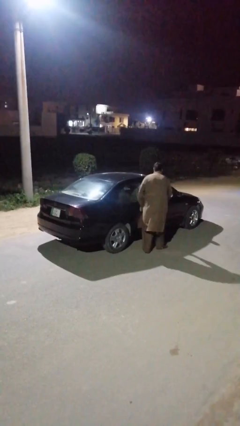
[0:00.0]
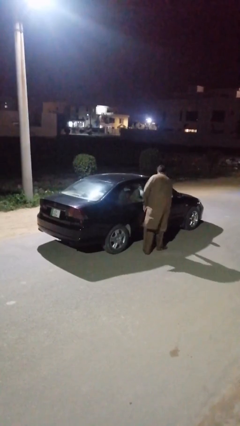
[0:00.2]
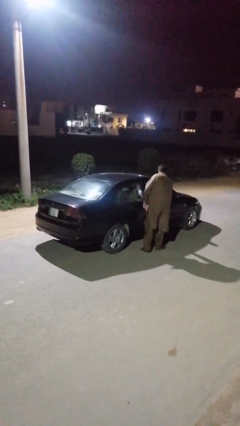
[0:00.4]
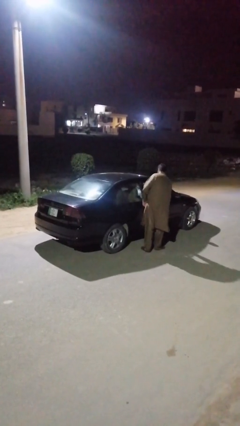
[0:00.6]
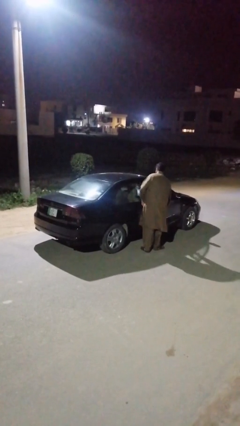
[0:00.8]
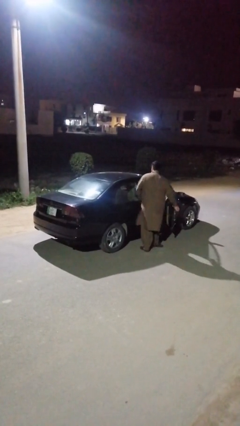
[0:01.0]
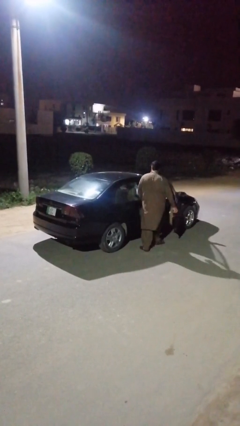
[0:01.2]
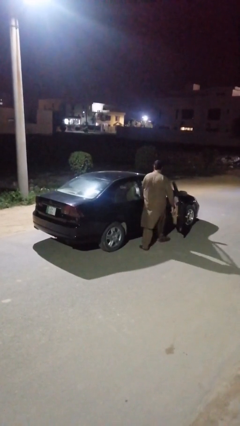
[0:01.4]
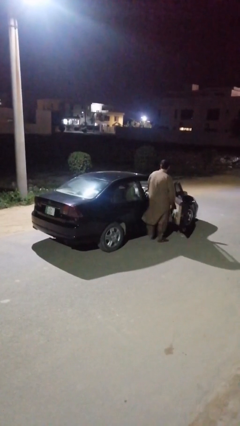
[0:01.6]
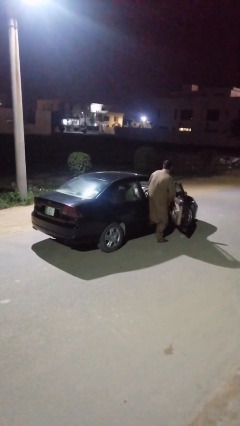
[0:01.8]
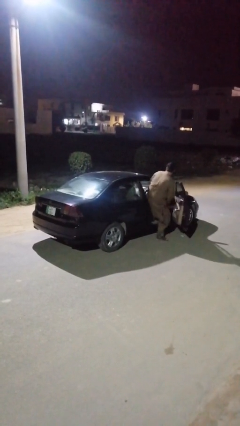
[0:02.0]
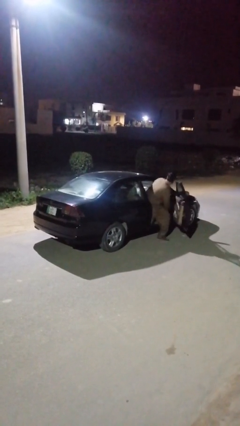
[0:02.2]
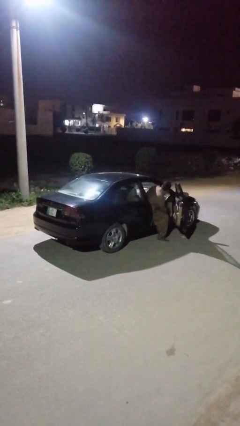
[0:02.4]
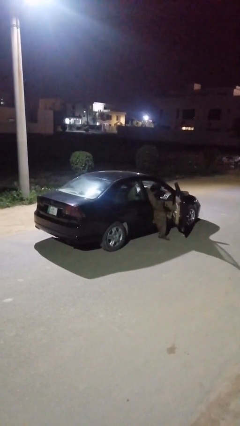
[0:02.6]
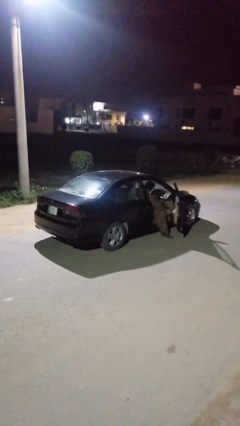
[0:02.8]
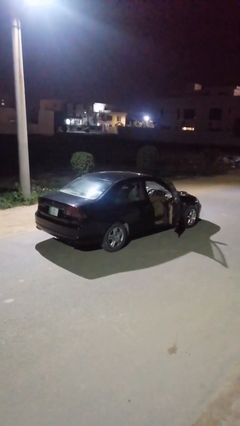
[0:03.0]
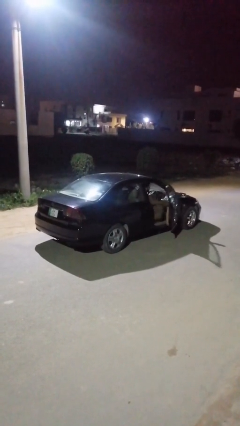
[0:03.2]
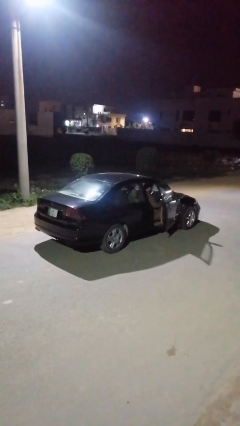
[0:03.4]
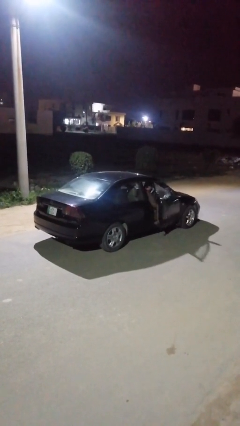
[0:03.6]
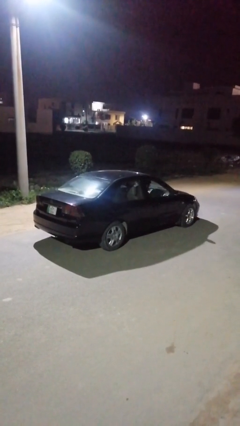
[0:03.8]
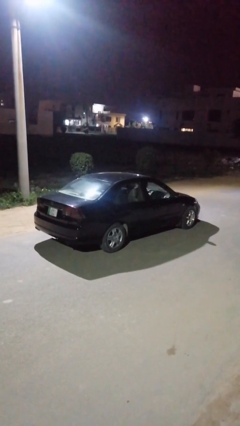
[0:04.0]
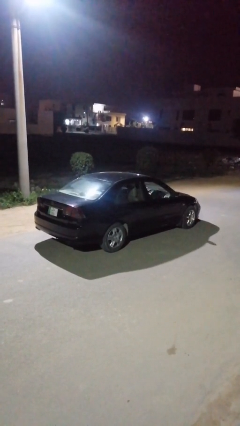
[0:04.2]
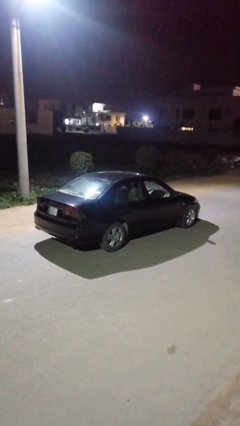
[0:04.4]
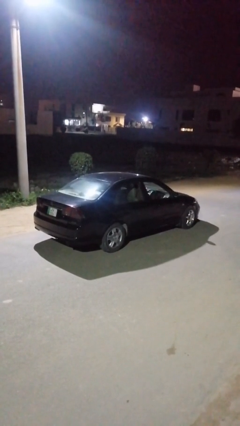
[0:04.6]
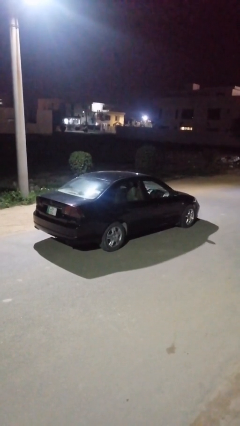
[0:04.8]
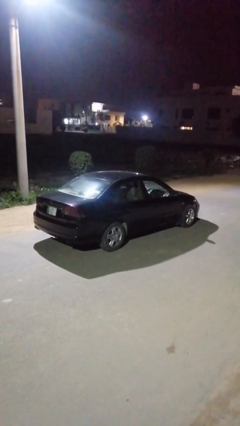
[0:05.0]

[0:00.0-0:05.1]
car picks up person

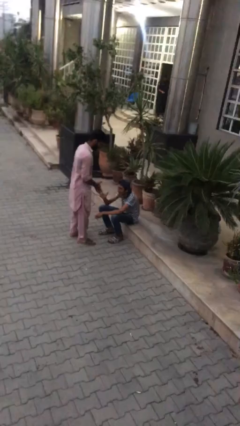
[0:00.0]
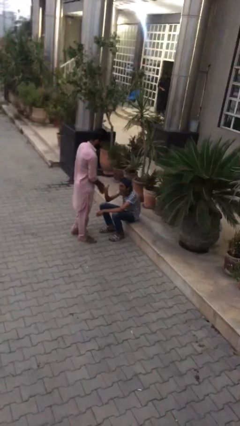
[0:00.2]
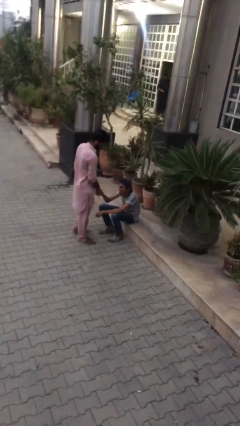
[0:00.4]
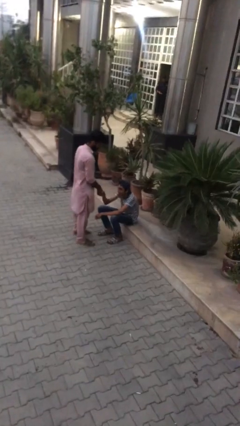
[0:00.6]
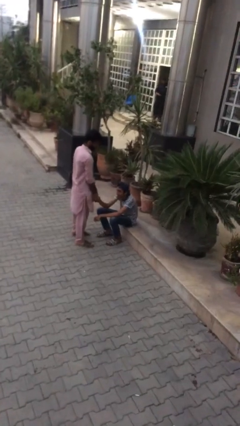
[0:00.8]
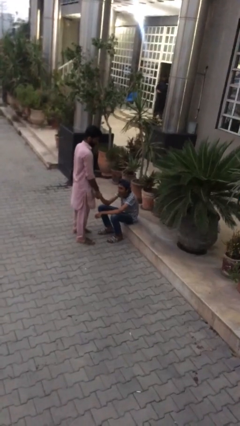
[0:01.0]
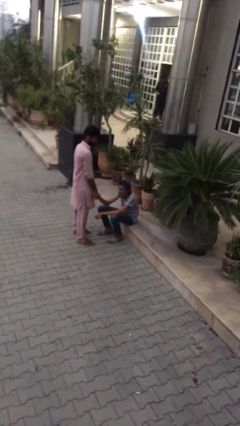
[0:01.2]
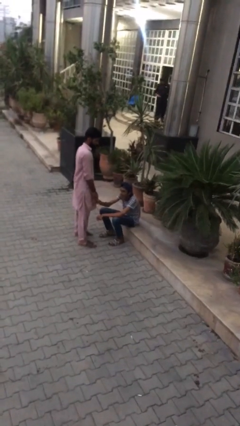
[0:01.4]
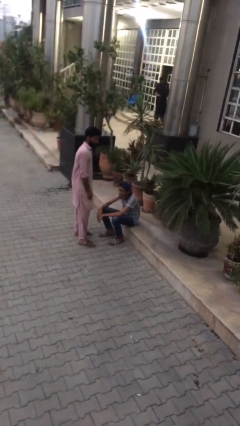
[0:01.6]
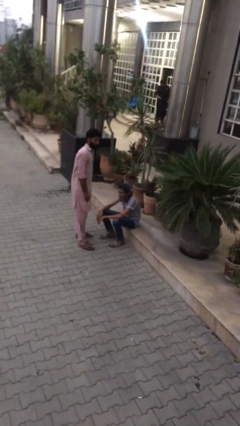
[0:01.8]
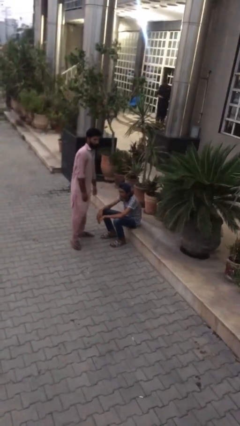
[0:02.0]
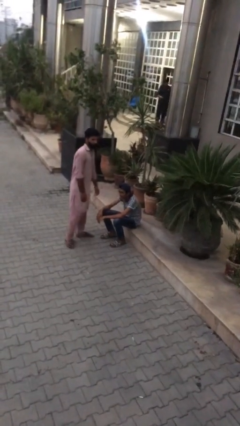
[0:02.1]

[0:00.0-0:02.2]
person shakes hand

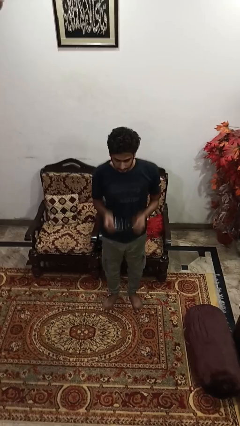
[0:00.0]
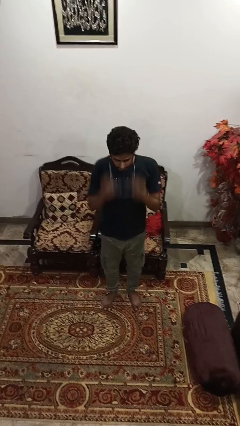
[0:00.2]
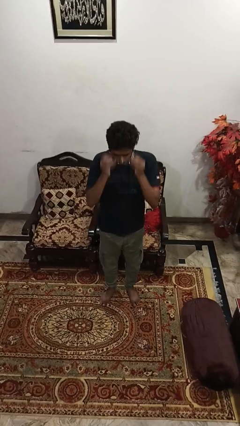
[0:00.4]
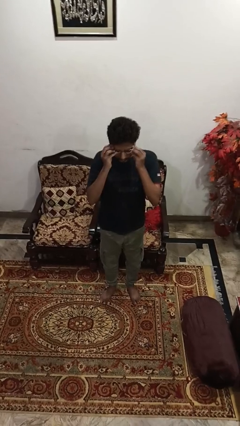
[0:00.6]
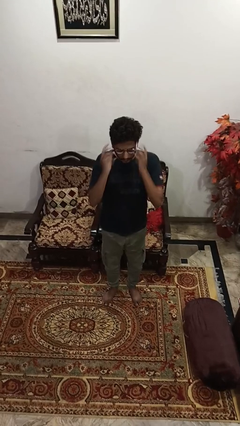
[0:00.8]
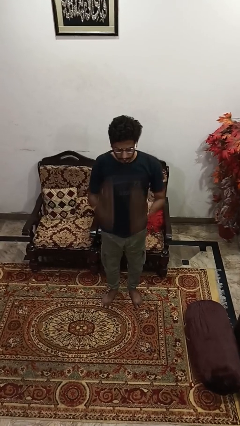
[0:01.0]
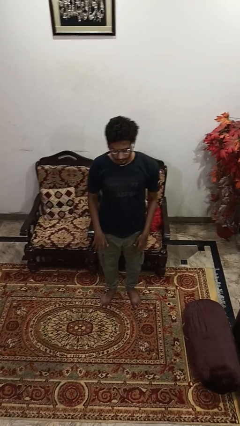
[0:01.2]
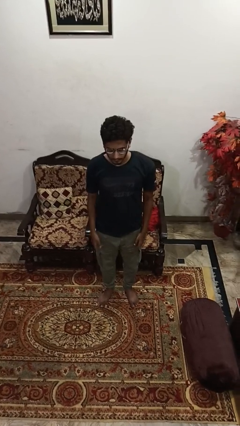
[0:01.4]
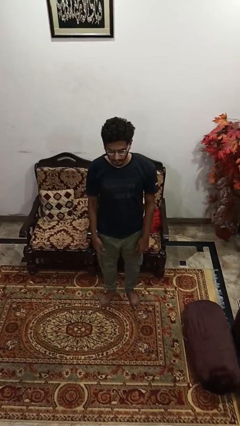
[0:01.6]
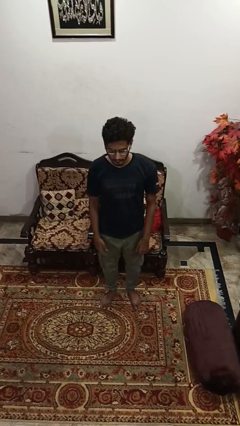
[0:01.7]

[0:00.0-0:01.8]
person puts on glasses

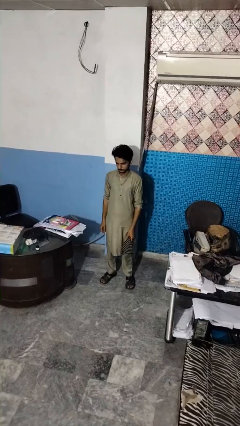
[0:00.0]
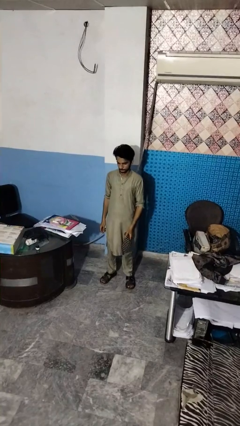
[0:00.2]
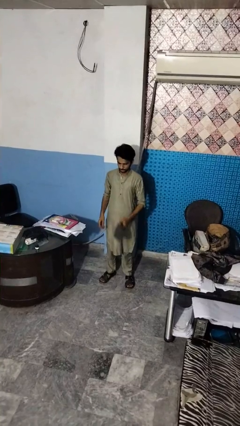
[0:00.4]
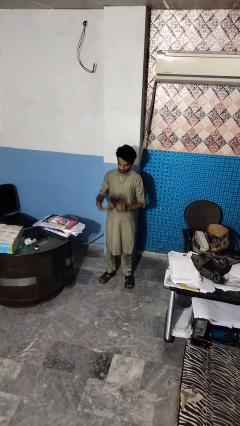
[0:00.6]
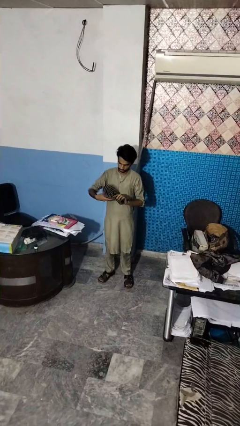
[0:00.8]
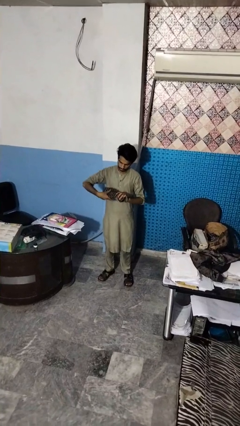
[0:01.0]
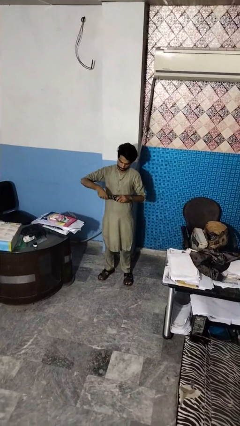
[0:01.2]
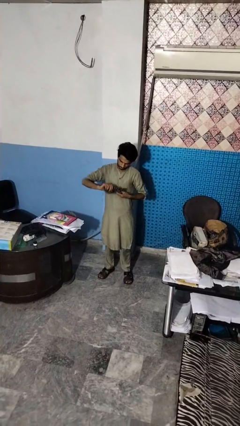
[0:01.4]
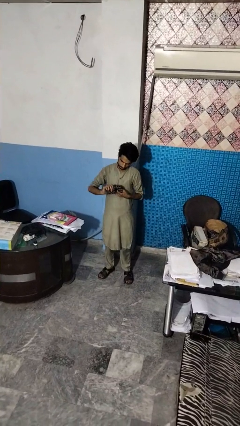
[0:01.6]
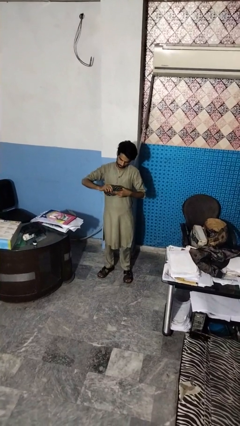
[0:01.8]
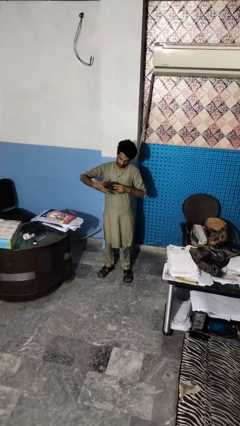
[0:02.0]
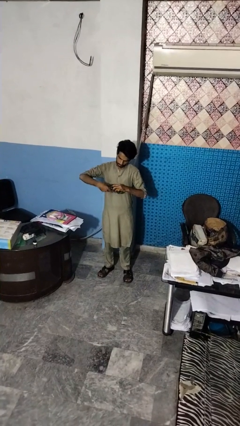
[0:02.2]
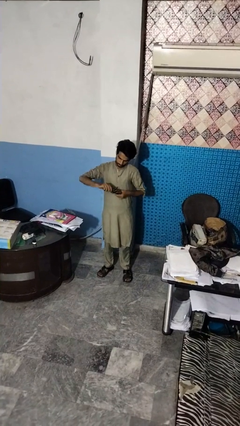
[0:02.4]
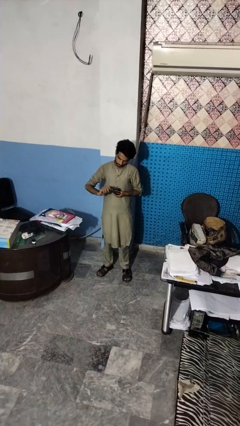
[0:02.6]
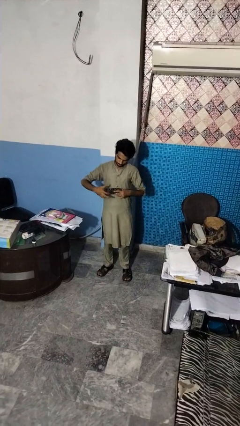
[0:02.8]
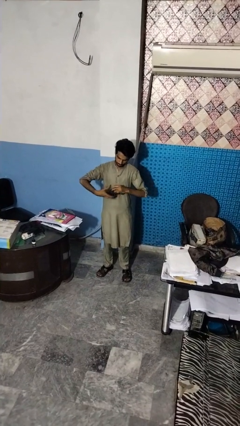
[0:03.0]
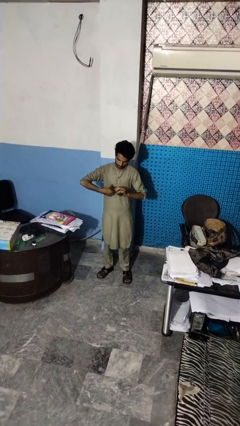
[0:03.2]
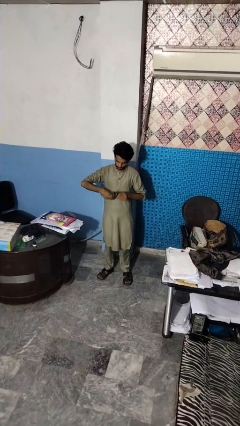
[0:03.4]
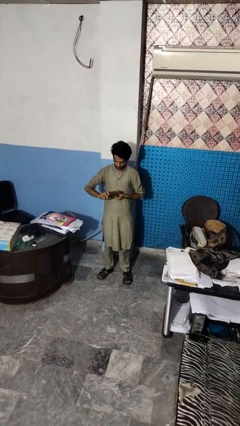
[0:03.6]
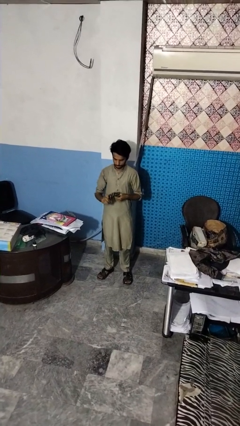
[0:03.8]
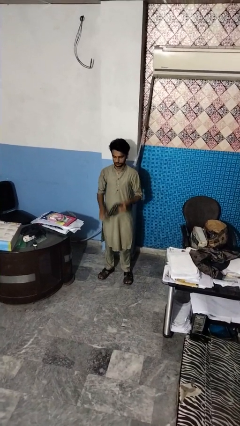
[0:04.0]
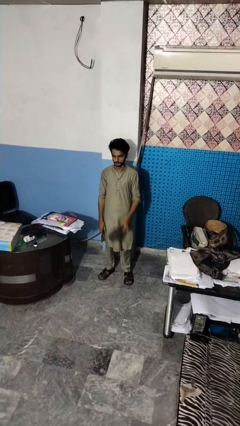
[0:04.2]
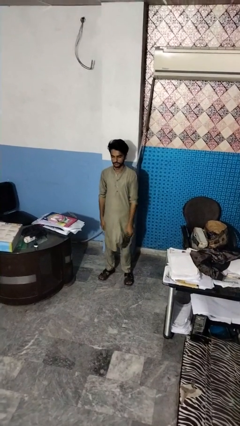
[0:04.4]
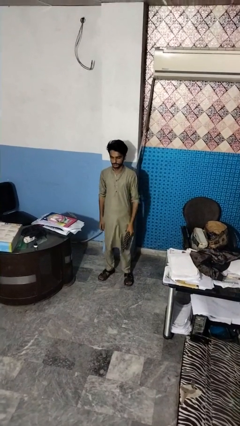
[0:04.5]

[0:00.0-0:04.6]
person squeezes object

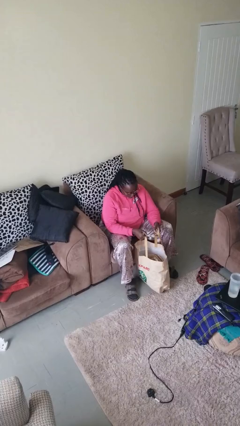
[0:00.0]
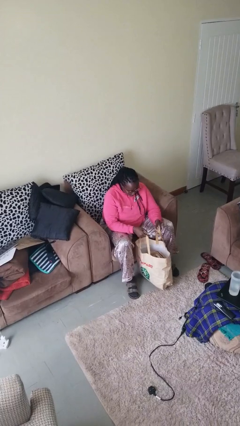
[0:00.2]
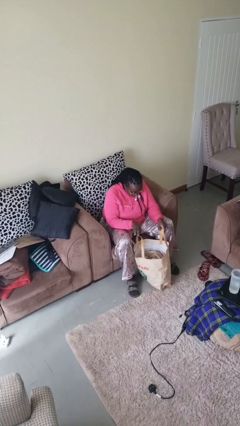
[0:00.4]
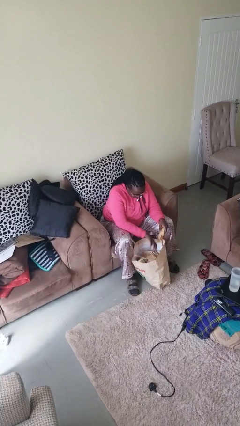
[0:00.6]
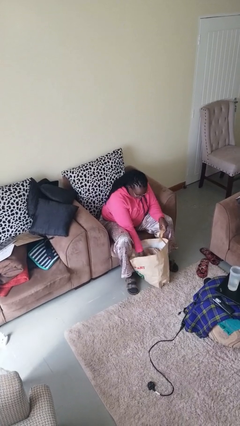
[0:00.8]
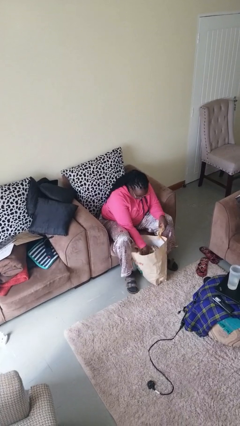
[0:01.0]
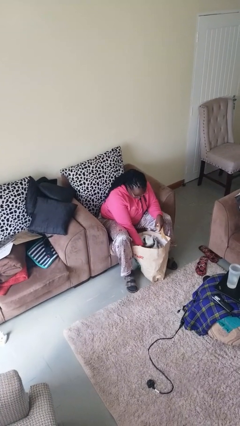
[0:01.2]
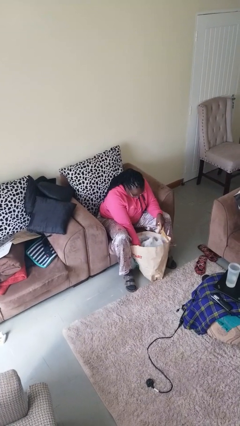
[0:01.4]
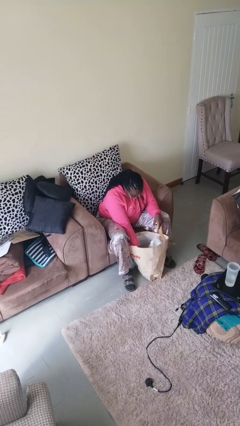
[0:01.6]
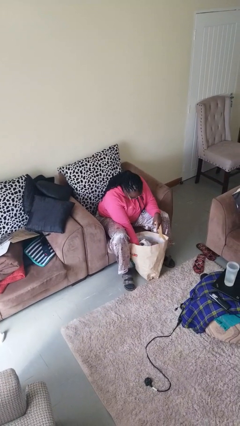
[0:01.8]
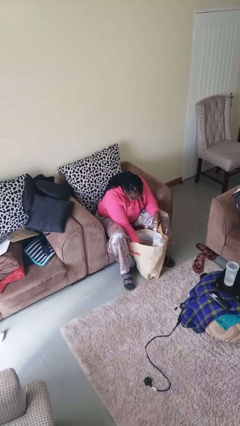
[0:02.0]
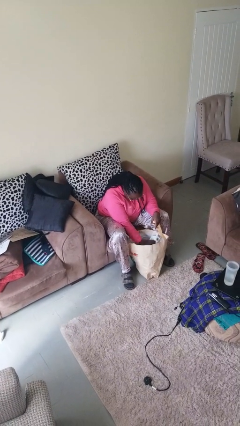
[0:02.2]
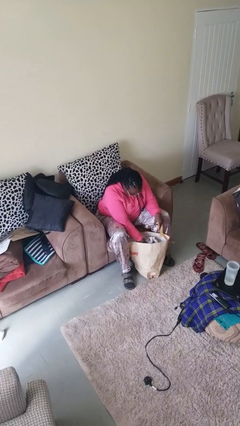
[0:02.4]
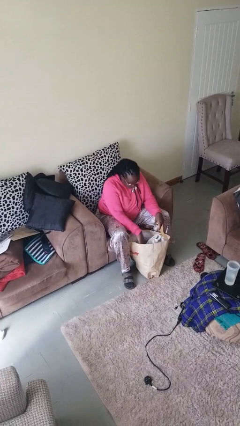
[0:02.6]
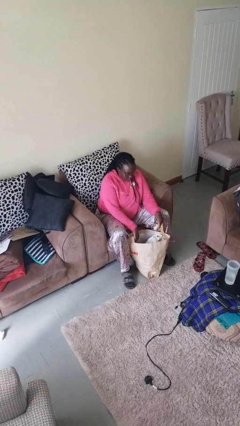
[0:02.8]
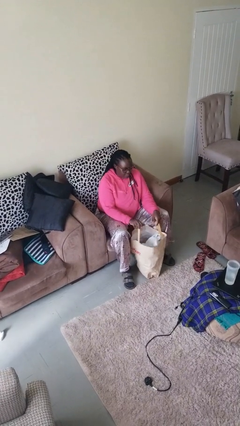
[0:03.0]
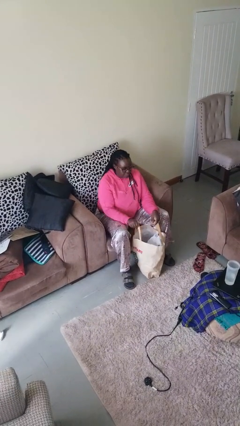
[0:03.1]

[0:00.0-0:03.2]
person searches in bag

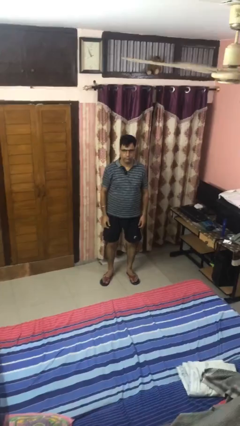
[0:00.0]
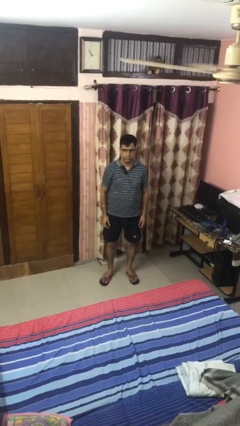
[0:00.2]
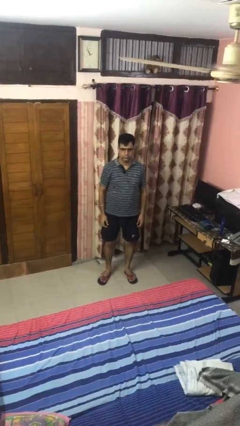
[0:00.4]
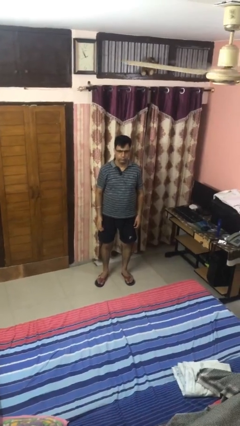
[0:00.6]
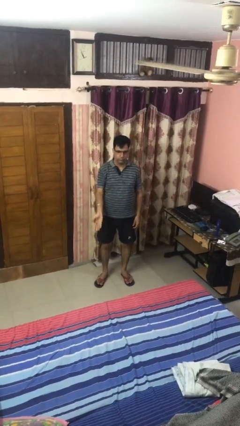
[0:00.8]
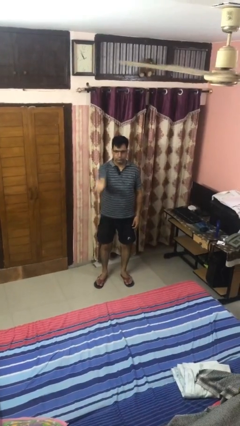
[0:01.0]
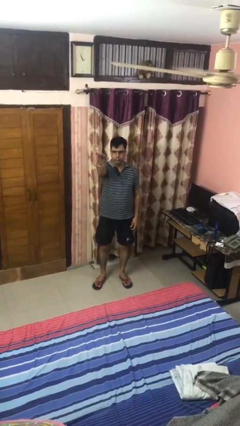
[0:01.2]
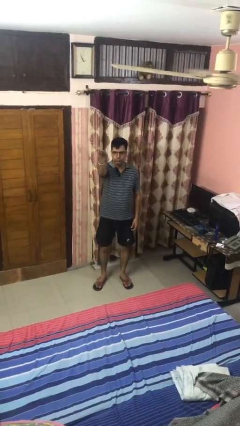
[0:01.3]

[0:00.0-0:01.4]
person gestures swipe up
